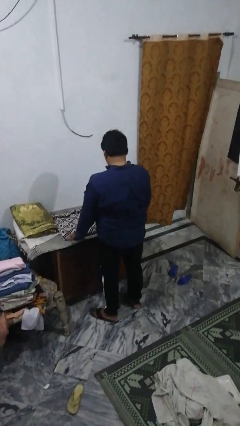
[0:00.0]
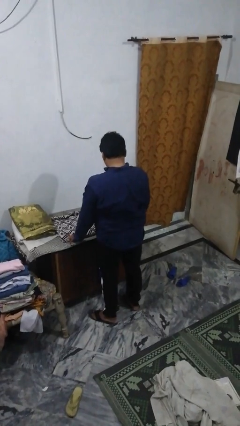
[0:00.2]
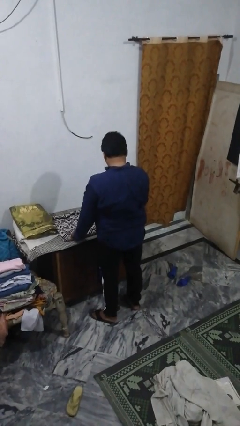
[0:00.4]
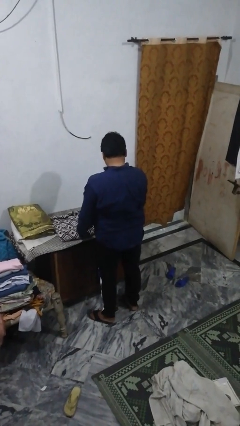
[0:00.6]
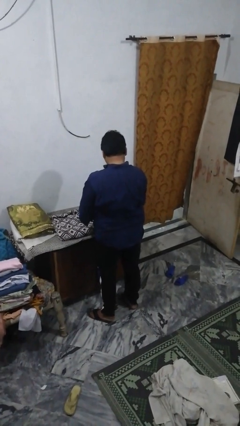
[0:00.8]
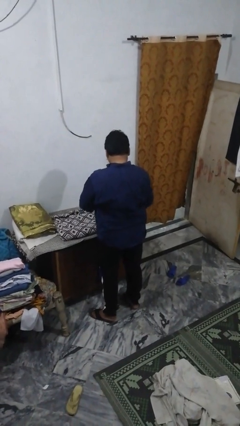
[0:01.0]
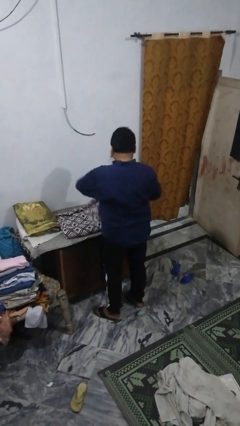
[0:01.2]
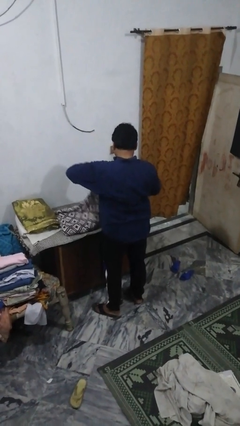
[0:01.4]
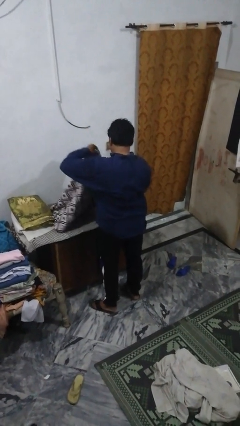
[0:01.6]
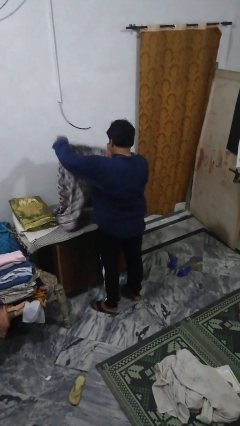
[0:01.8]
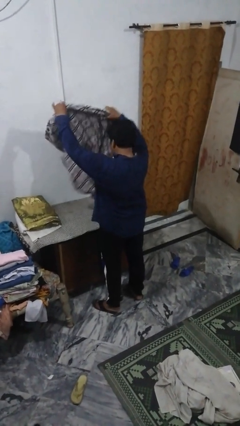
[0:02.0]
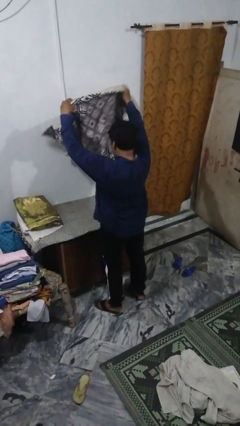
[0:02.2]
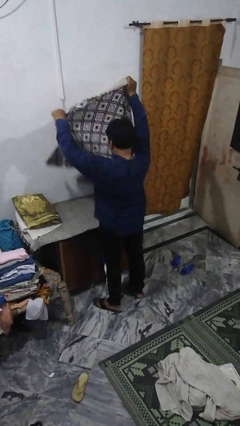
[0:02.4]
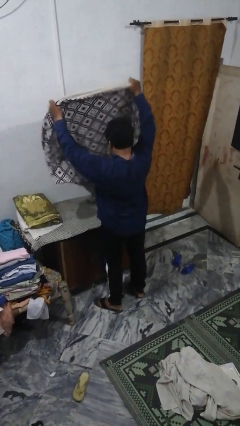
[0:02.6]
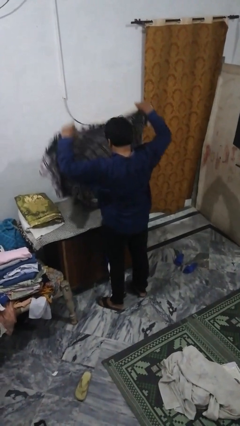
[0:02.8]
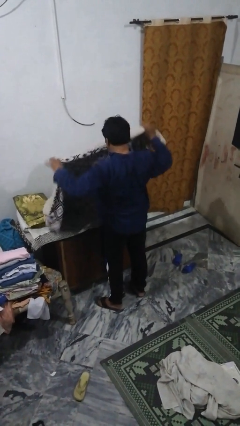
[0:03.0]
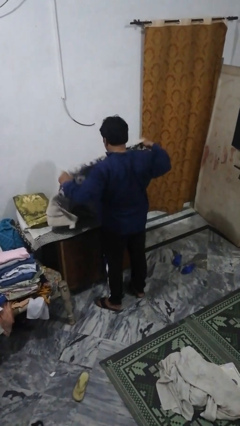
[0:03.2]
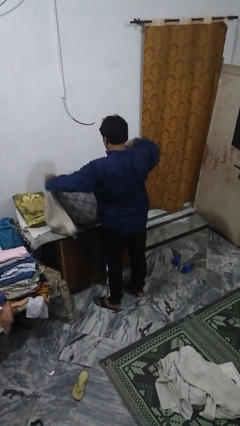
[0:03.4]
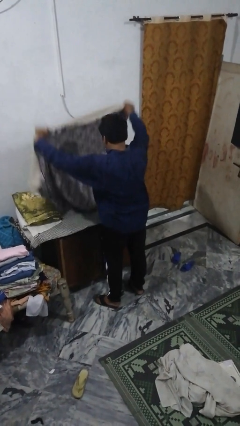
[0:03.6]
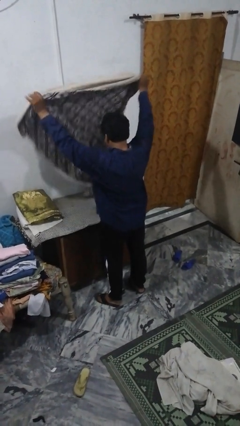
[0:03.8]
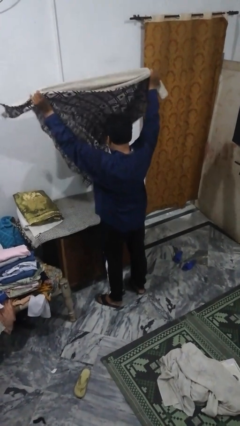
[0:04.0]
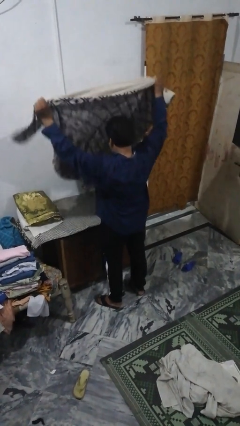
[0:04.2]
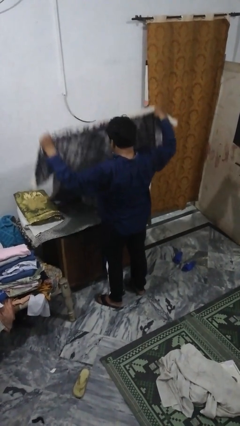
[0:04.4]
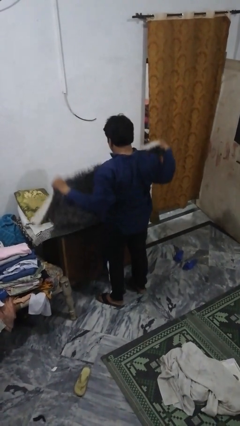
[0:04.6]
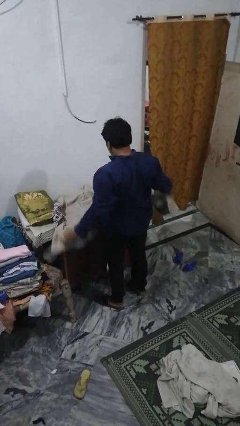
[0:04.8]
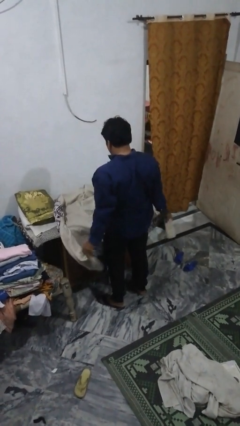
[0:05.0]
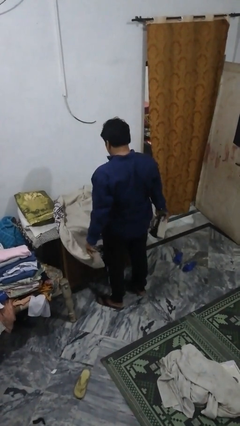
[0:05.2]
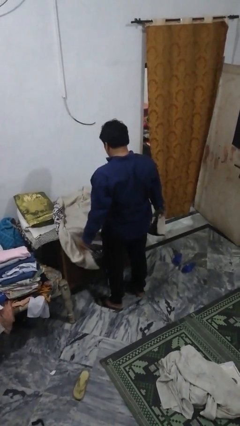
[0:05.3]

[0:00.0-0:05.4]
person unfolds blanket

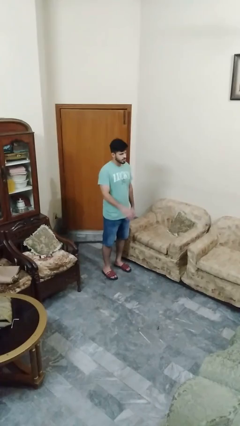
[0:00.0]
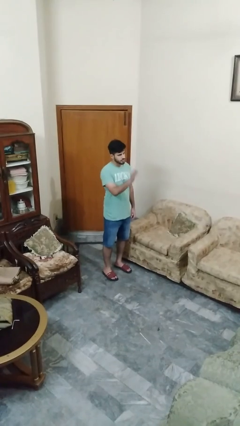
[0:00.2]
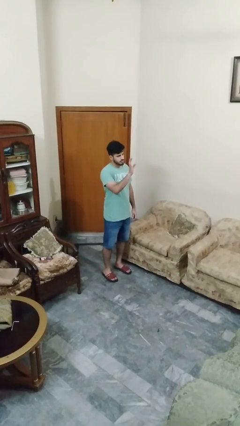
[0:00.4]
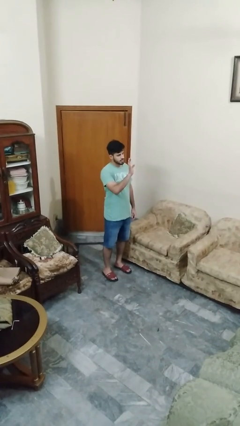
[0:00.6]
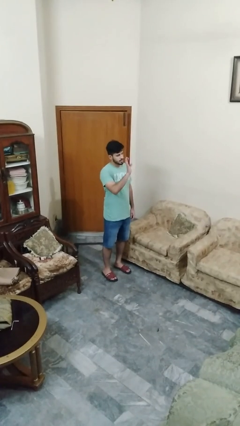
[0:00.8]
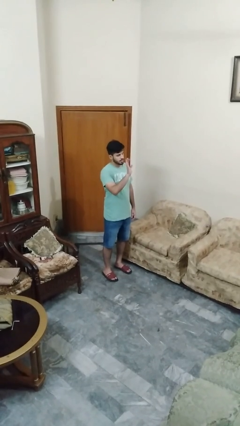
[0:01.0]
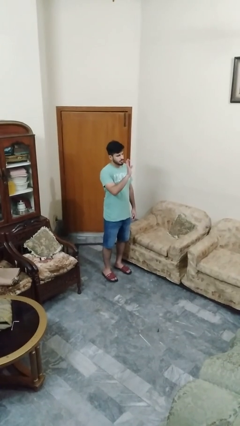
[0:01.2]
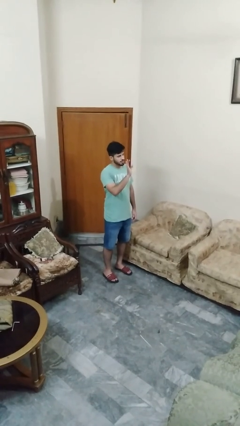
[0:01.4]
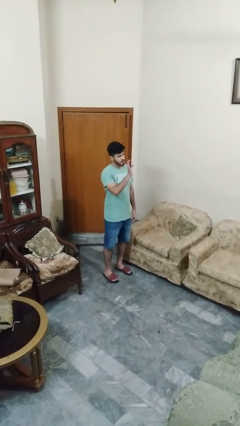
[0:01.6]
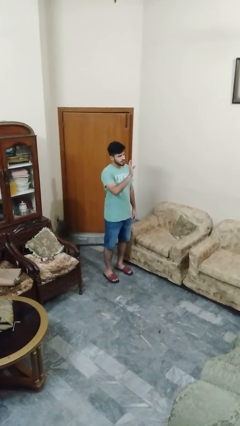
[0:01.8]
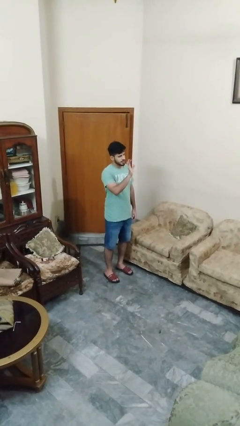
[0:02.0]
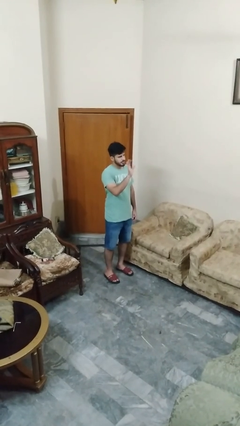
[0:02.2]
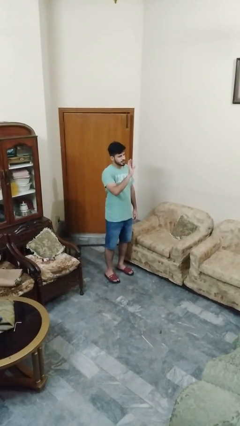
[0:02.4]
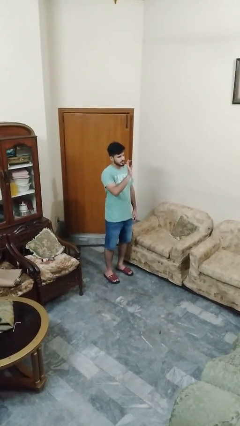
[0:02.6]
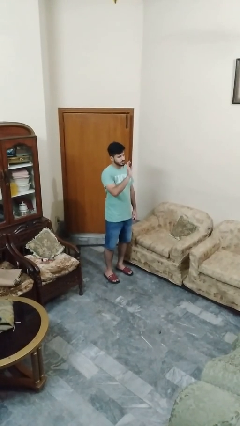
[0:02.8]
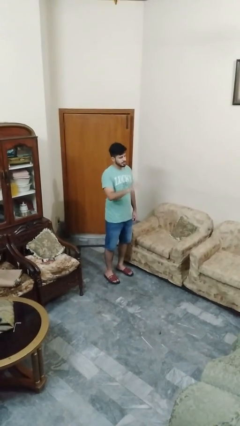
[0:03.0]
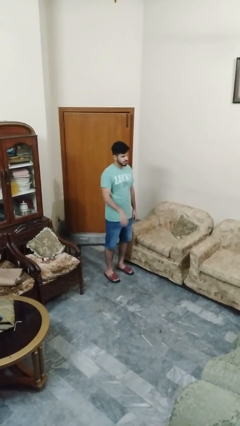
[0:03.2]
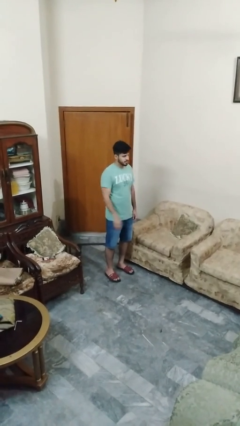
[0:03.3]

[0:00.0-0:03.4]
person waves at person

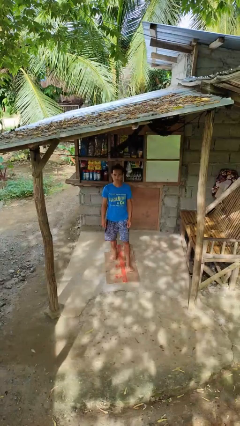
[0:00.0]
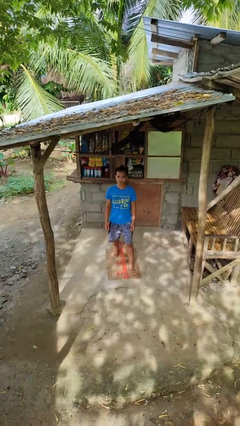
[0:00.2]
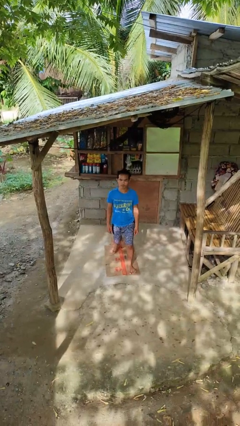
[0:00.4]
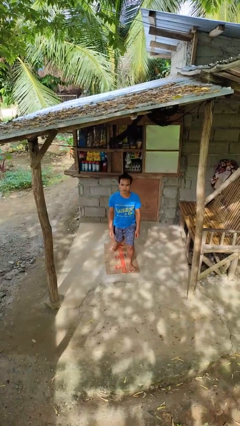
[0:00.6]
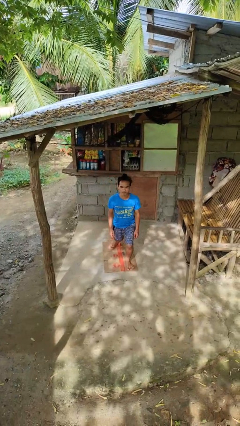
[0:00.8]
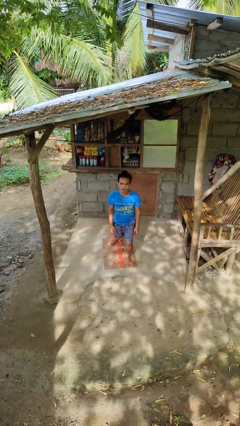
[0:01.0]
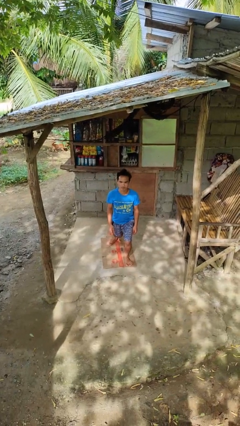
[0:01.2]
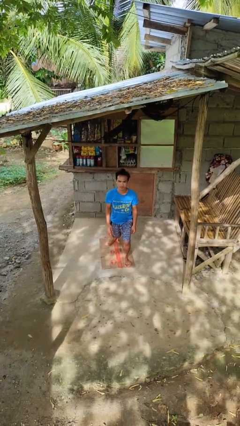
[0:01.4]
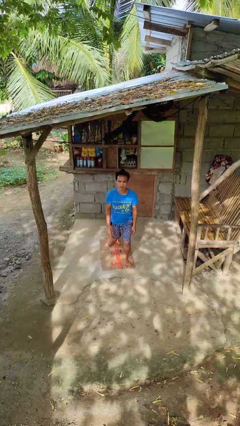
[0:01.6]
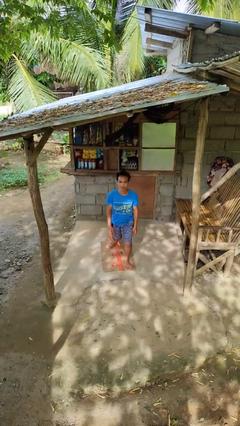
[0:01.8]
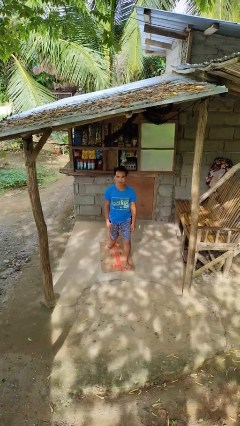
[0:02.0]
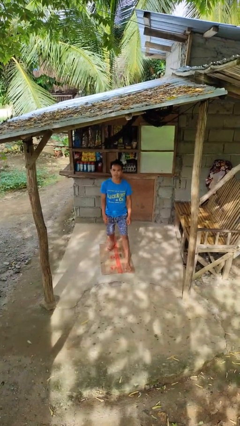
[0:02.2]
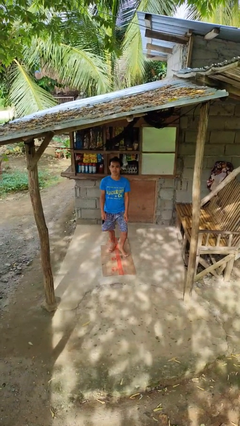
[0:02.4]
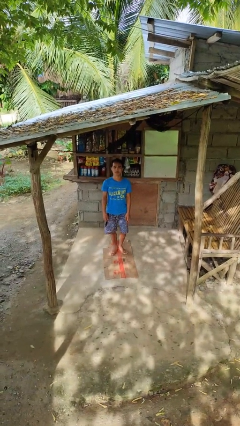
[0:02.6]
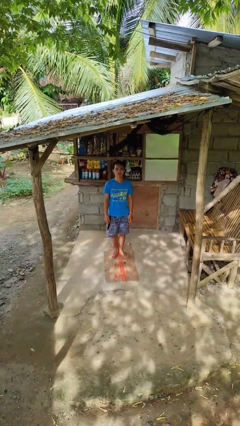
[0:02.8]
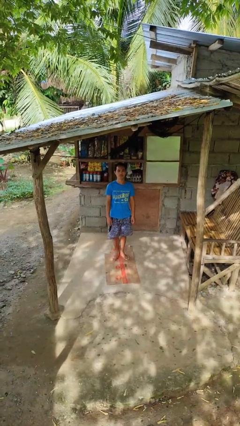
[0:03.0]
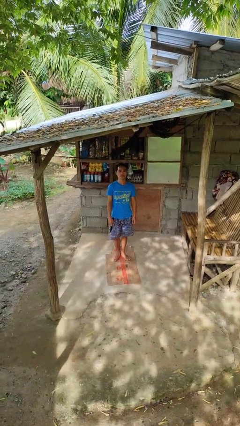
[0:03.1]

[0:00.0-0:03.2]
person exercises with lunges

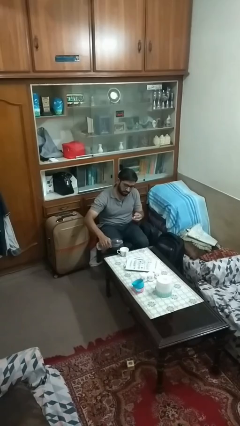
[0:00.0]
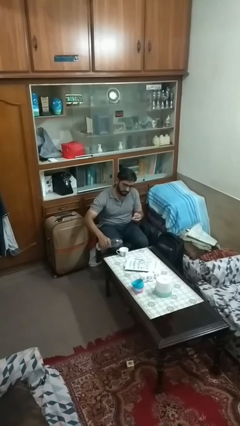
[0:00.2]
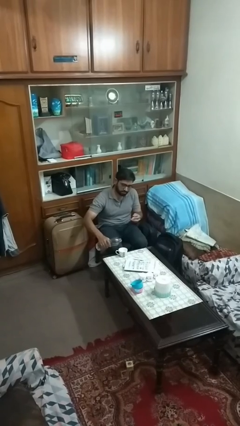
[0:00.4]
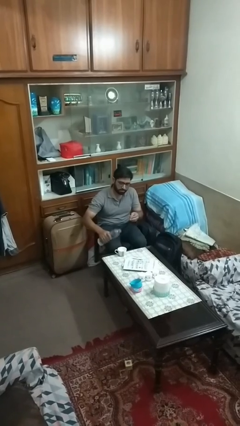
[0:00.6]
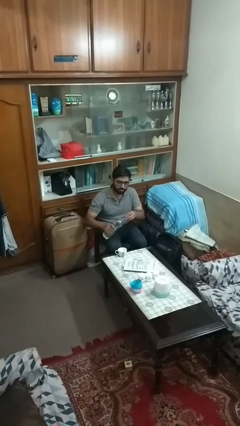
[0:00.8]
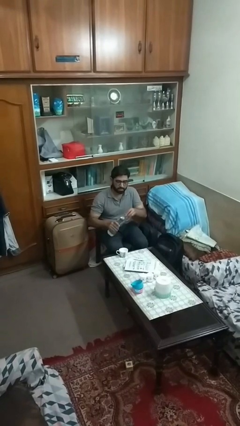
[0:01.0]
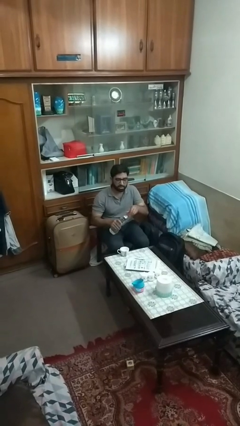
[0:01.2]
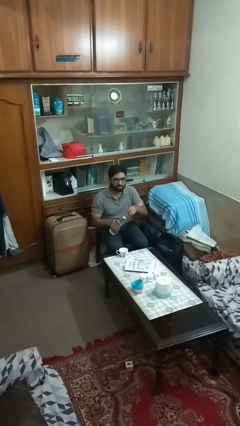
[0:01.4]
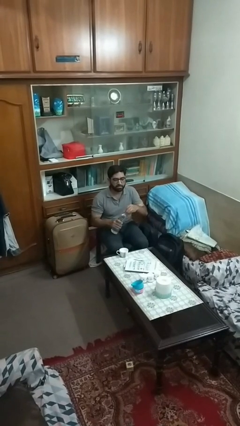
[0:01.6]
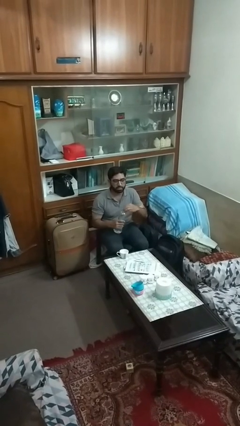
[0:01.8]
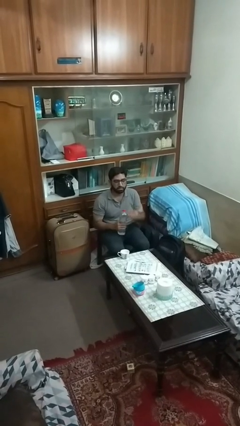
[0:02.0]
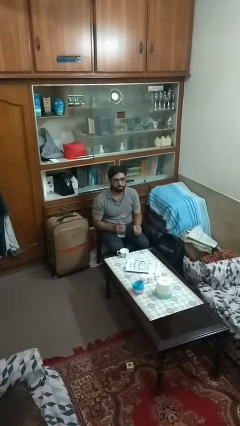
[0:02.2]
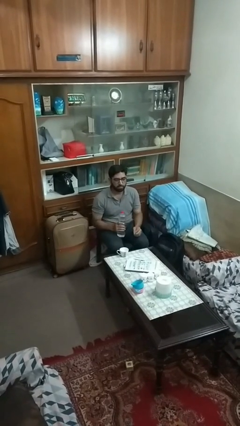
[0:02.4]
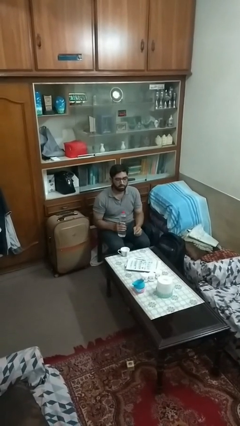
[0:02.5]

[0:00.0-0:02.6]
person screws lid to bottle

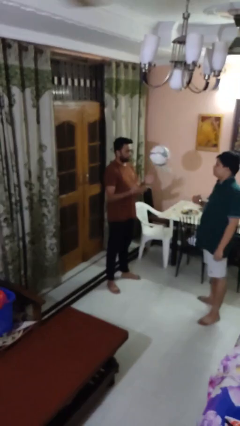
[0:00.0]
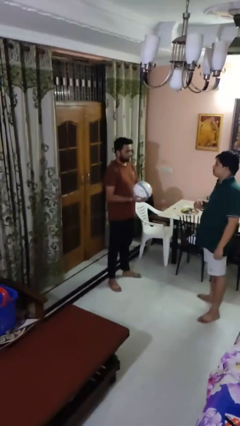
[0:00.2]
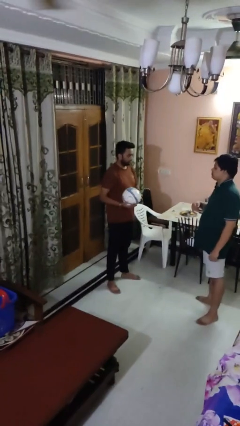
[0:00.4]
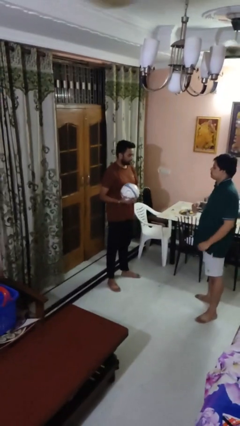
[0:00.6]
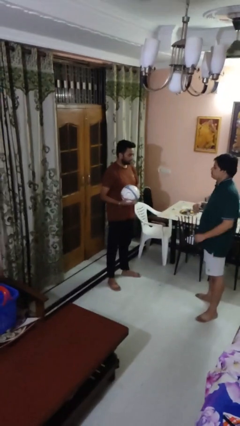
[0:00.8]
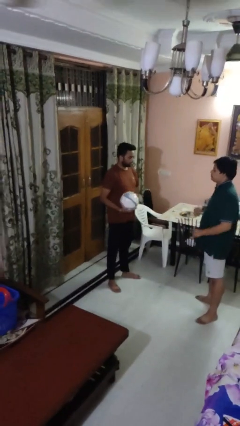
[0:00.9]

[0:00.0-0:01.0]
person catches object from person

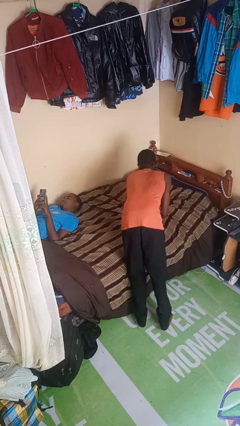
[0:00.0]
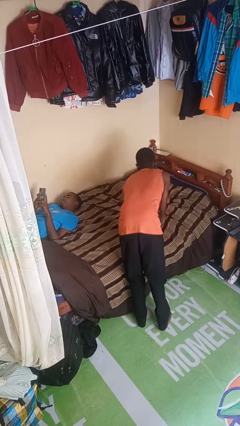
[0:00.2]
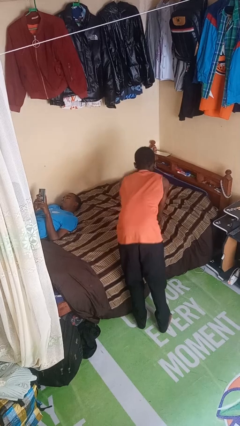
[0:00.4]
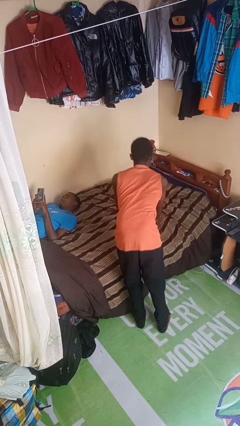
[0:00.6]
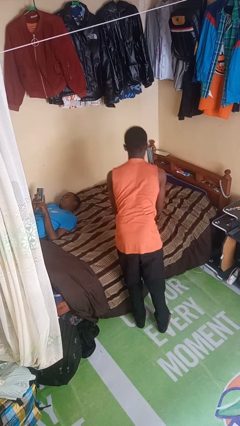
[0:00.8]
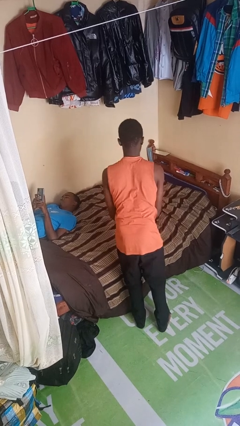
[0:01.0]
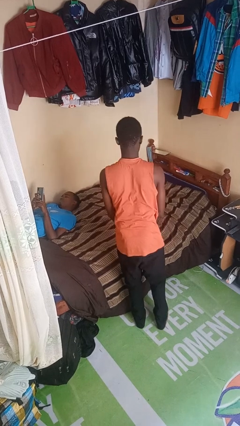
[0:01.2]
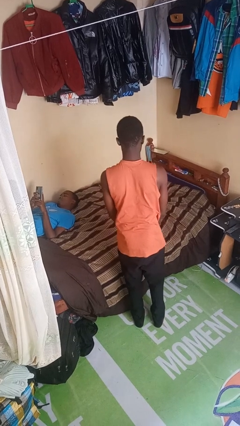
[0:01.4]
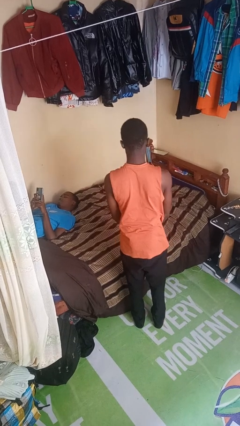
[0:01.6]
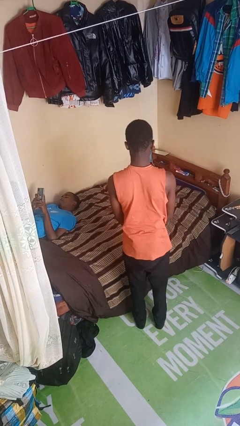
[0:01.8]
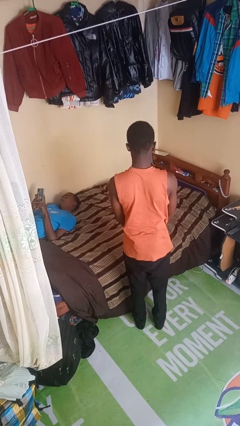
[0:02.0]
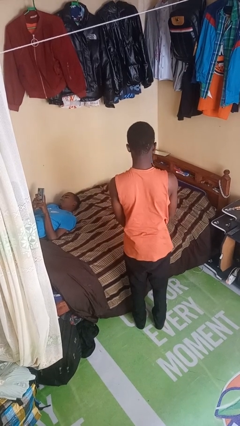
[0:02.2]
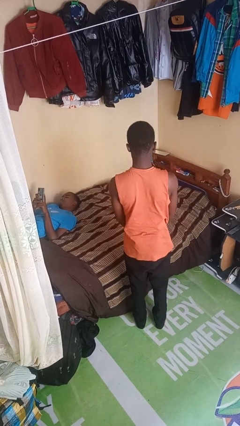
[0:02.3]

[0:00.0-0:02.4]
person stands up
